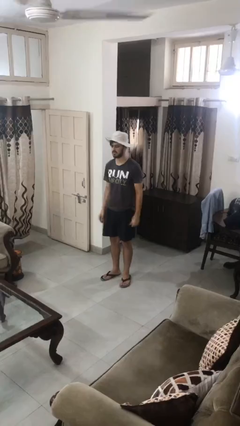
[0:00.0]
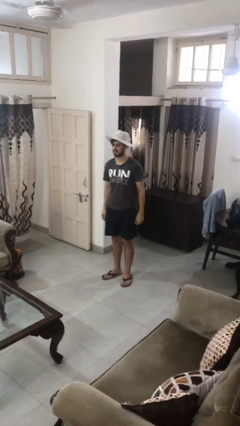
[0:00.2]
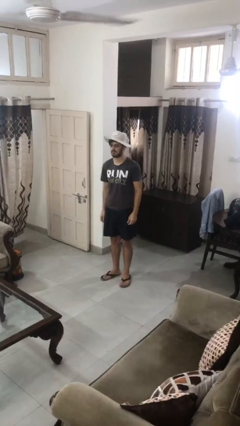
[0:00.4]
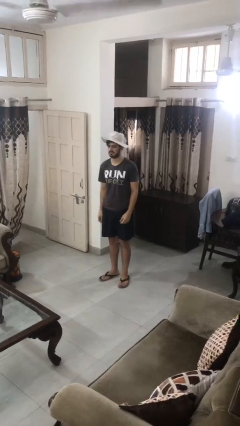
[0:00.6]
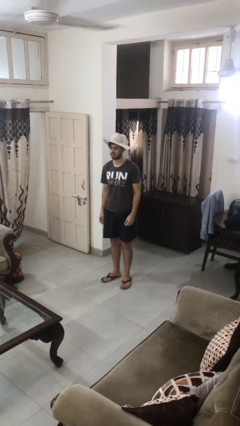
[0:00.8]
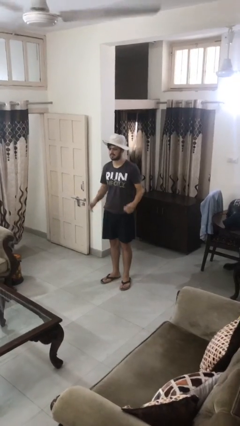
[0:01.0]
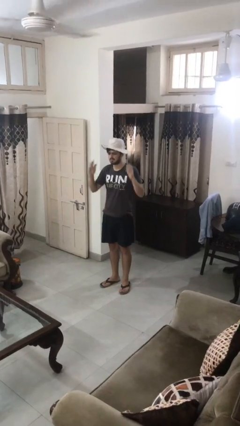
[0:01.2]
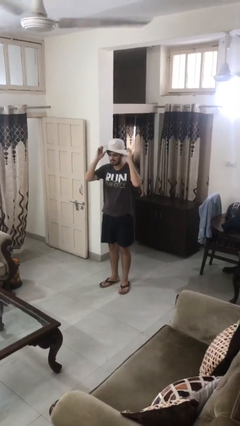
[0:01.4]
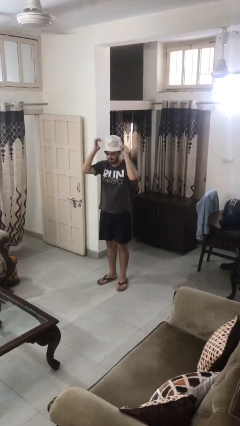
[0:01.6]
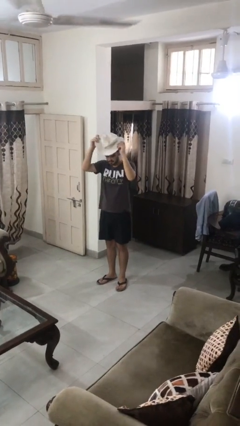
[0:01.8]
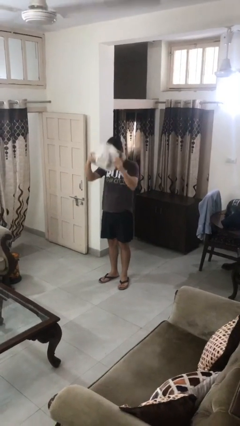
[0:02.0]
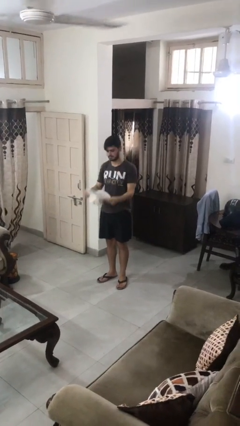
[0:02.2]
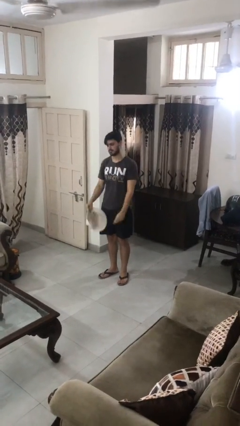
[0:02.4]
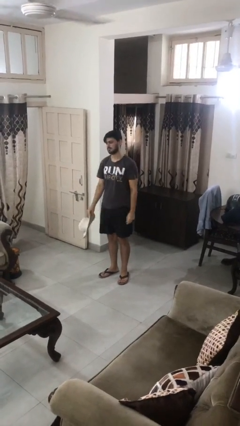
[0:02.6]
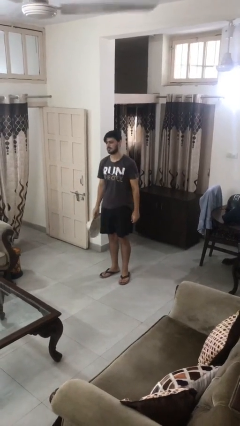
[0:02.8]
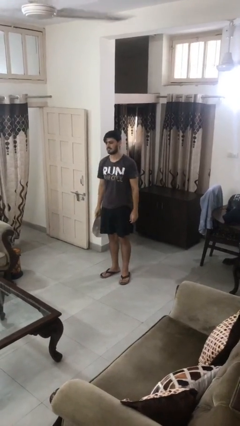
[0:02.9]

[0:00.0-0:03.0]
person takes off hat

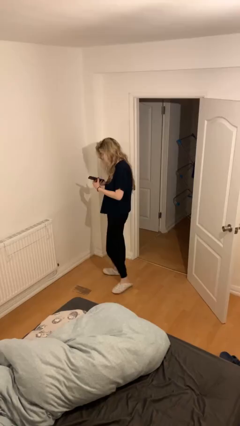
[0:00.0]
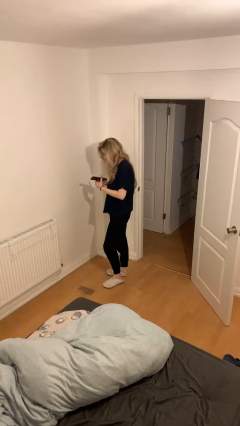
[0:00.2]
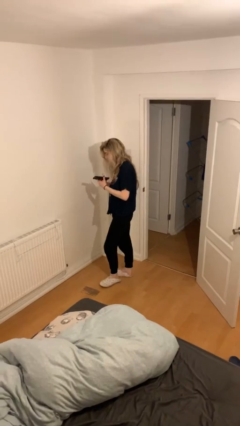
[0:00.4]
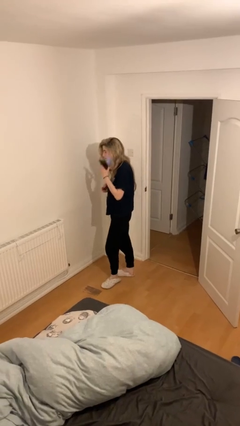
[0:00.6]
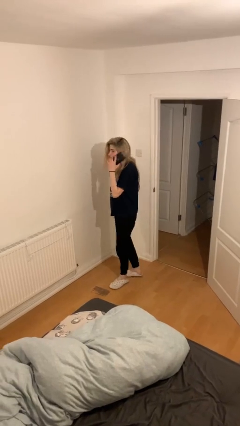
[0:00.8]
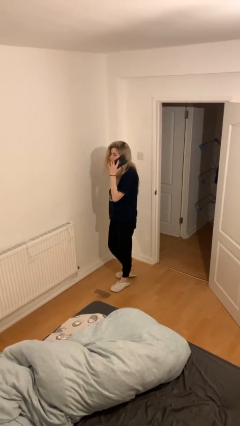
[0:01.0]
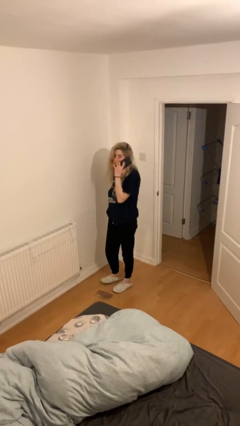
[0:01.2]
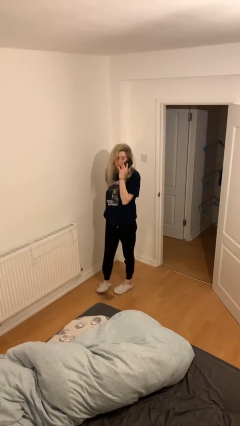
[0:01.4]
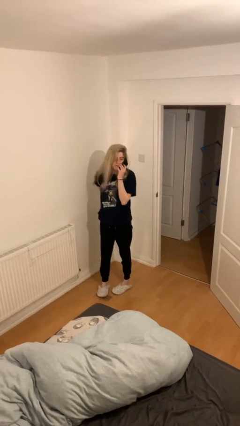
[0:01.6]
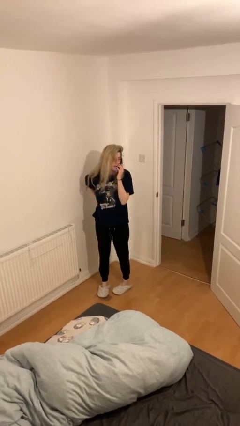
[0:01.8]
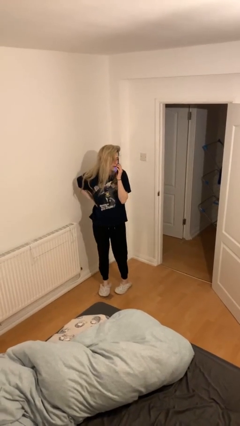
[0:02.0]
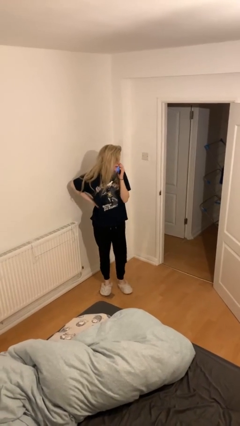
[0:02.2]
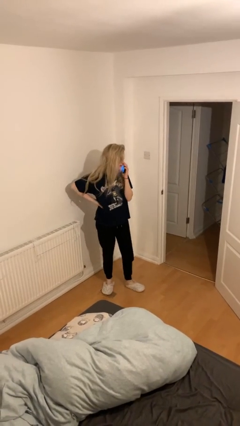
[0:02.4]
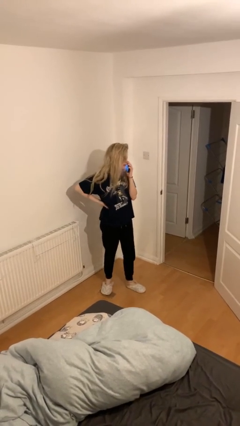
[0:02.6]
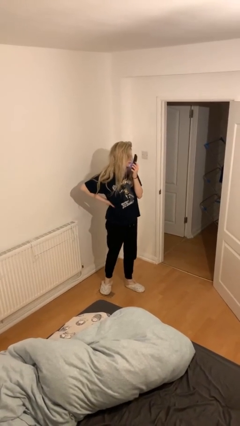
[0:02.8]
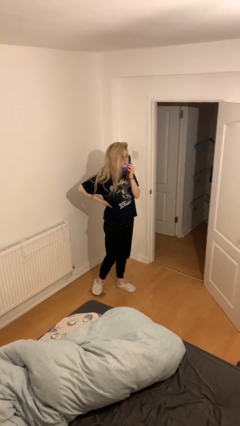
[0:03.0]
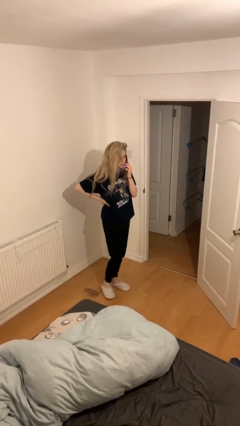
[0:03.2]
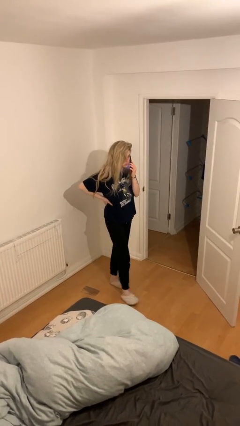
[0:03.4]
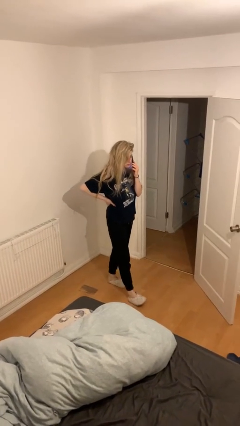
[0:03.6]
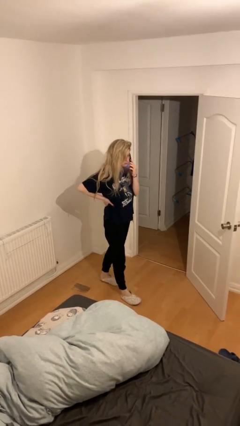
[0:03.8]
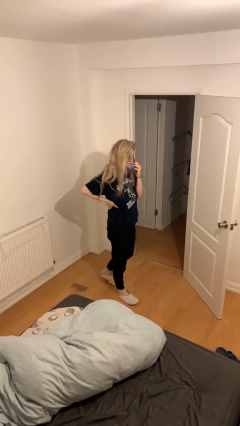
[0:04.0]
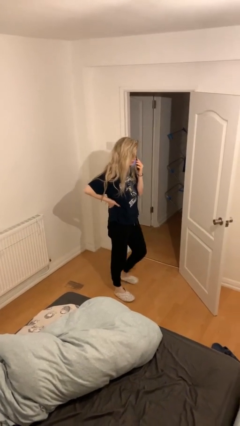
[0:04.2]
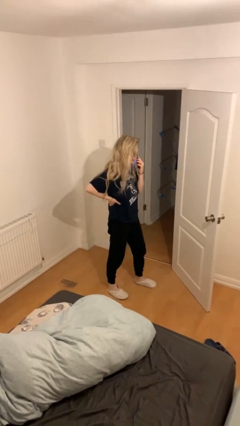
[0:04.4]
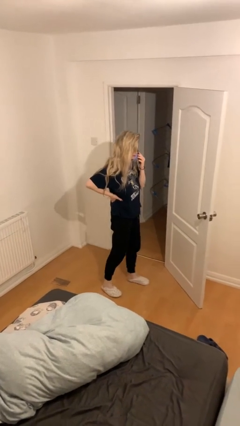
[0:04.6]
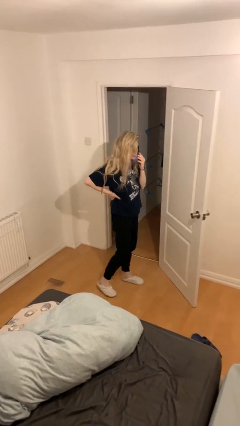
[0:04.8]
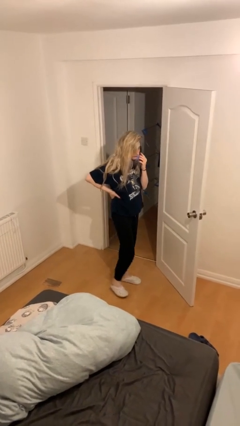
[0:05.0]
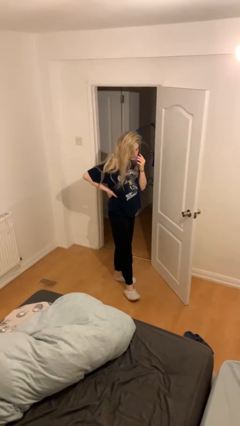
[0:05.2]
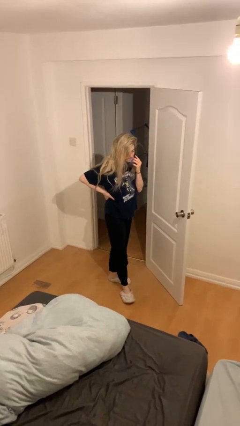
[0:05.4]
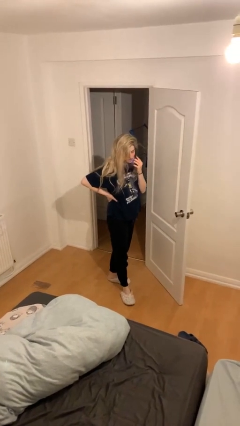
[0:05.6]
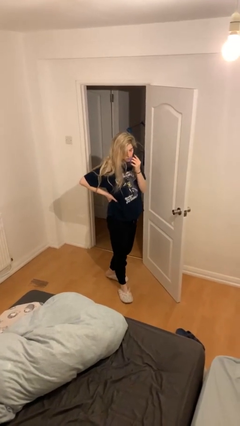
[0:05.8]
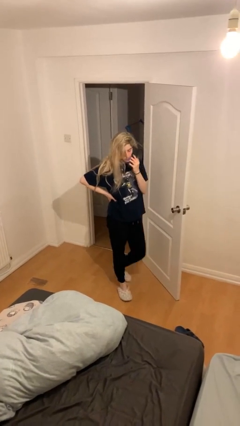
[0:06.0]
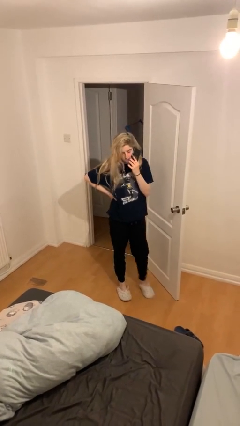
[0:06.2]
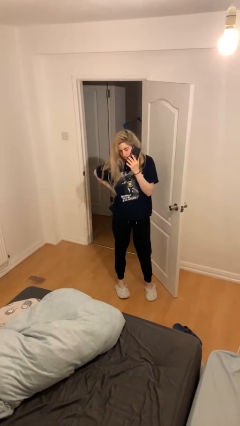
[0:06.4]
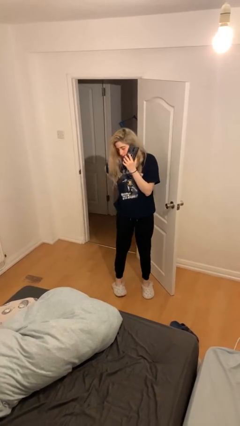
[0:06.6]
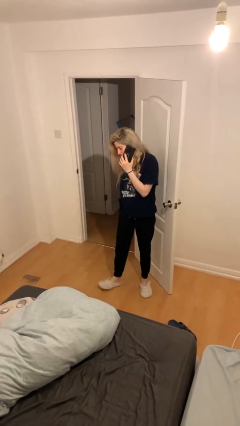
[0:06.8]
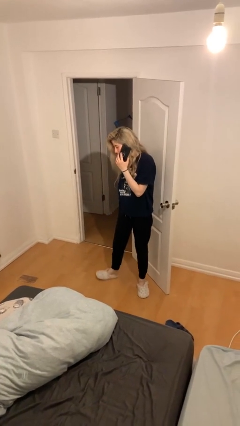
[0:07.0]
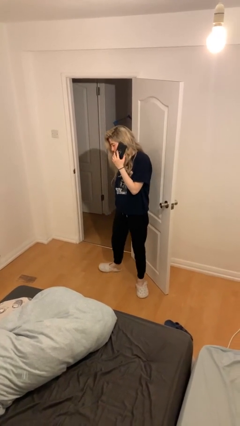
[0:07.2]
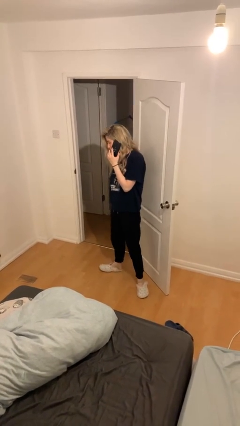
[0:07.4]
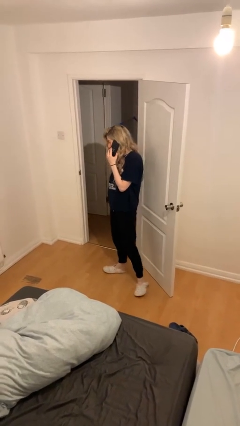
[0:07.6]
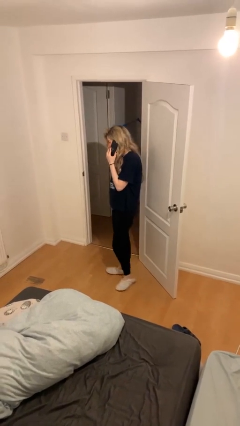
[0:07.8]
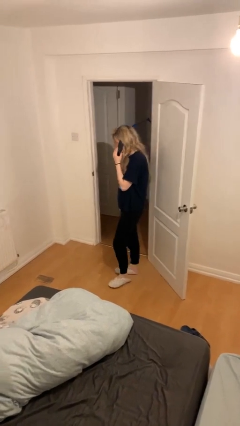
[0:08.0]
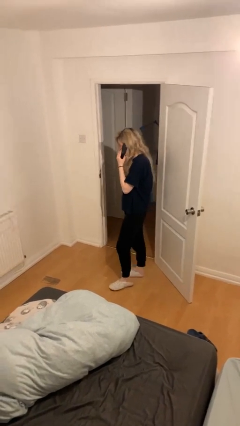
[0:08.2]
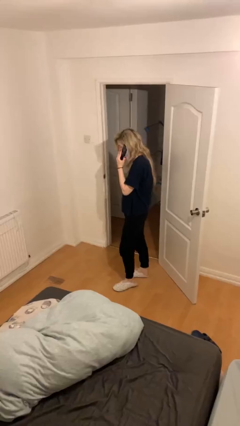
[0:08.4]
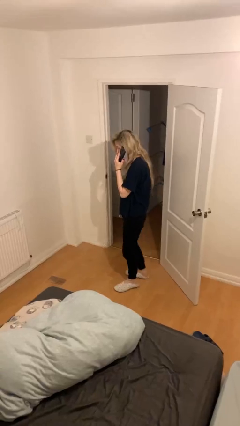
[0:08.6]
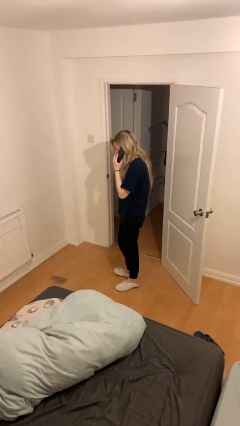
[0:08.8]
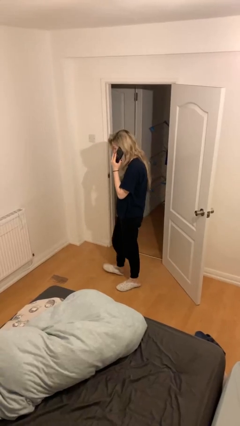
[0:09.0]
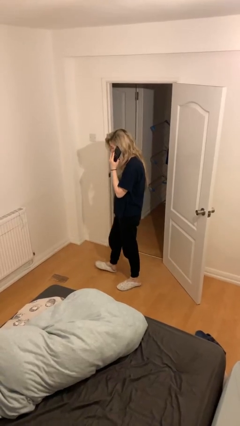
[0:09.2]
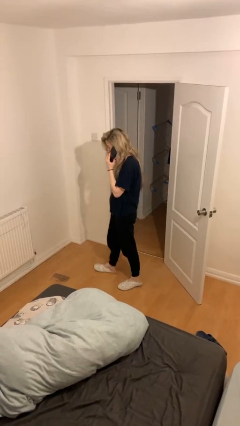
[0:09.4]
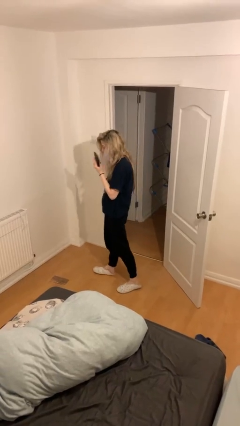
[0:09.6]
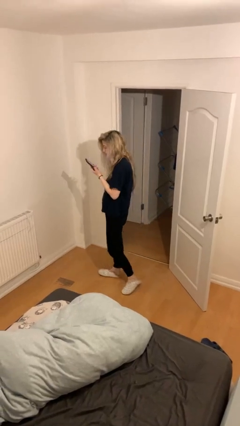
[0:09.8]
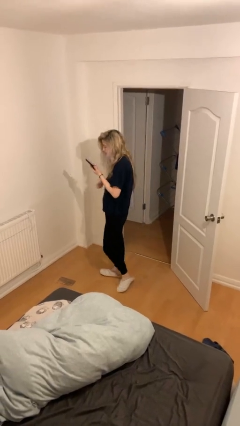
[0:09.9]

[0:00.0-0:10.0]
person talks on phone

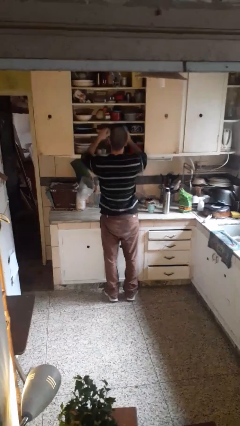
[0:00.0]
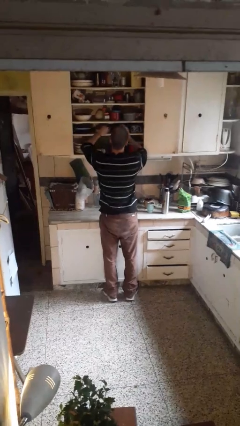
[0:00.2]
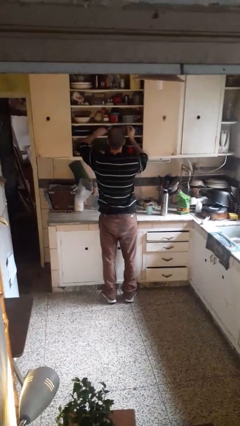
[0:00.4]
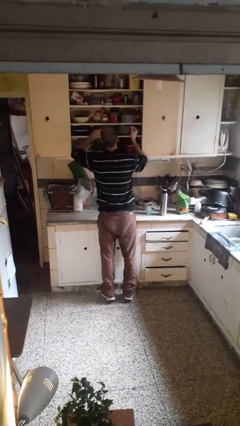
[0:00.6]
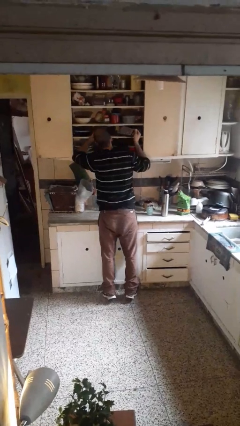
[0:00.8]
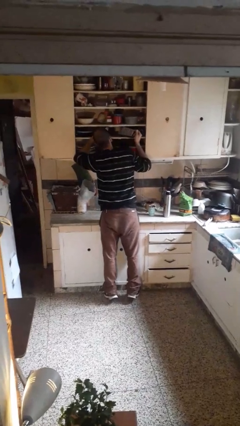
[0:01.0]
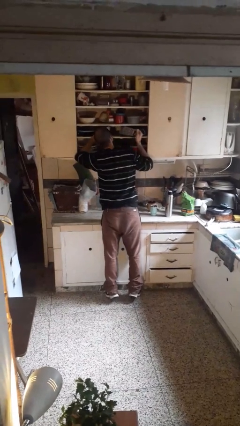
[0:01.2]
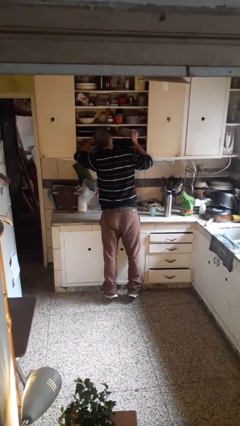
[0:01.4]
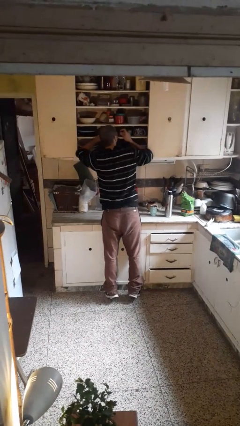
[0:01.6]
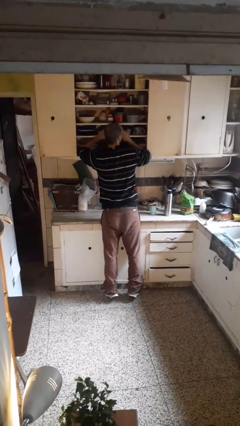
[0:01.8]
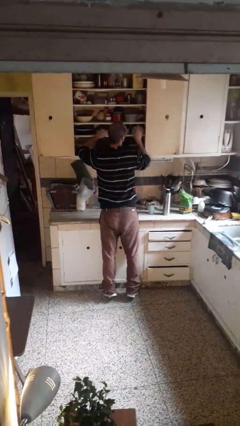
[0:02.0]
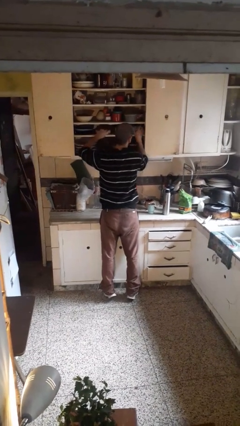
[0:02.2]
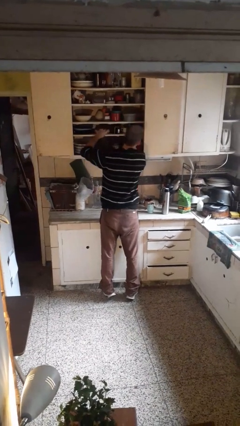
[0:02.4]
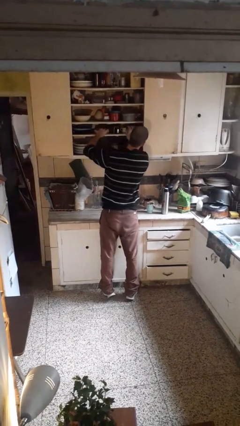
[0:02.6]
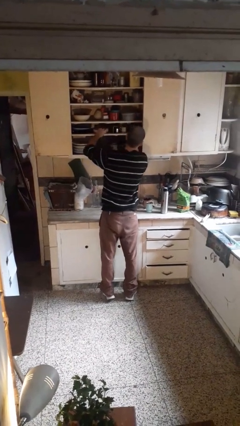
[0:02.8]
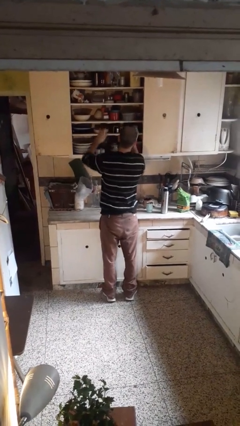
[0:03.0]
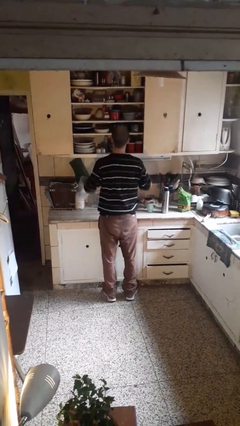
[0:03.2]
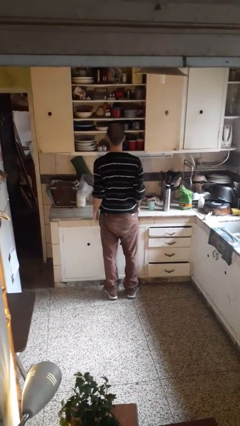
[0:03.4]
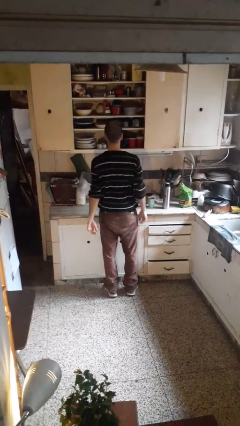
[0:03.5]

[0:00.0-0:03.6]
person searches in cabinet

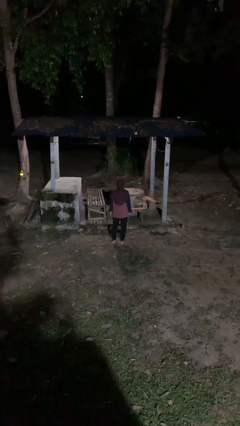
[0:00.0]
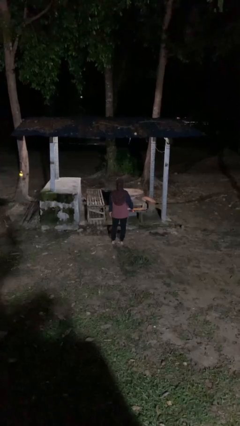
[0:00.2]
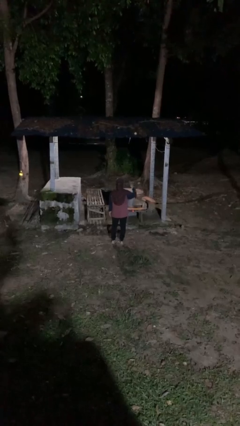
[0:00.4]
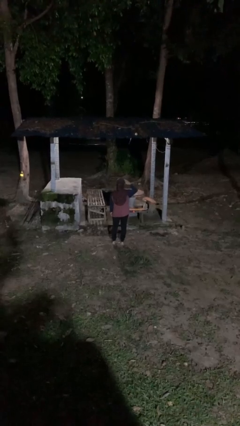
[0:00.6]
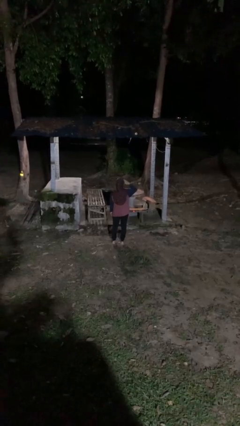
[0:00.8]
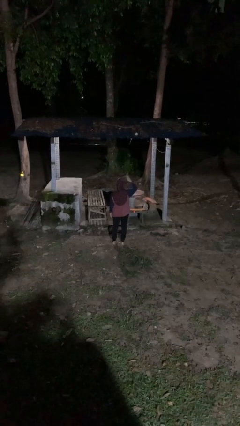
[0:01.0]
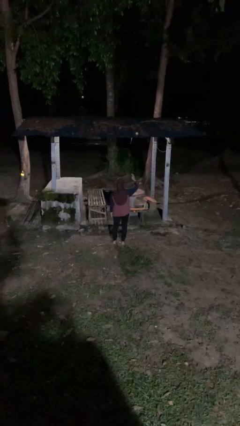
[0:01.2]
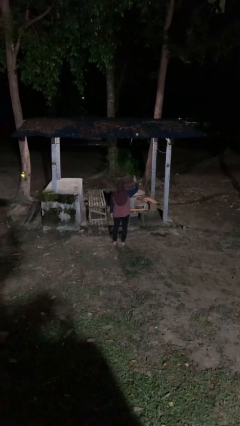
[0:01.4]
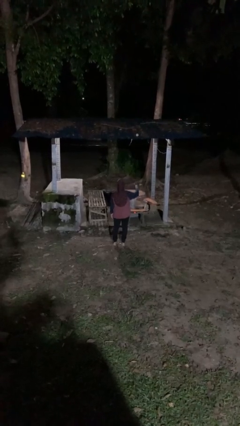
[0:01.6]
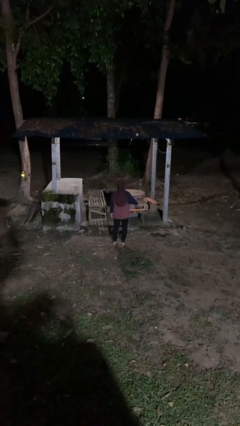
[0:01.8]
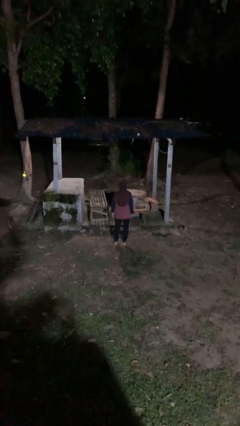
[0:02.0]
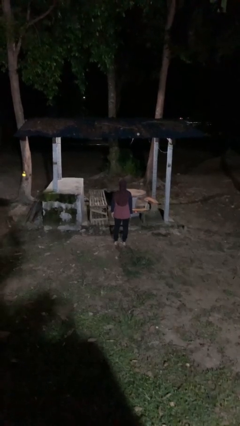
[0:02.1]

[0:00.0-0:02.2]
person salutes
